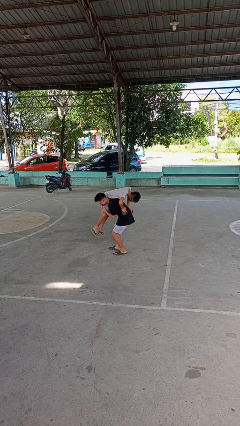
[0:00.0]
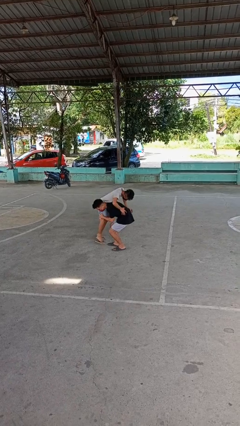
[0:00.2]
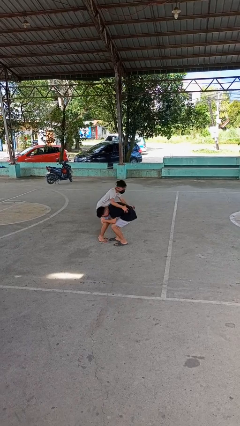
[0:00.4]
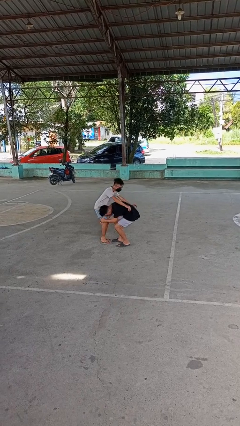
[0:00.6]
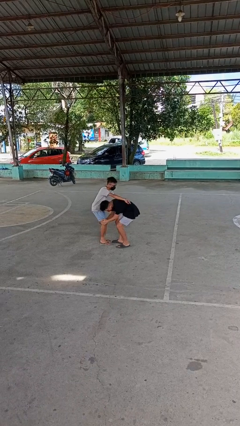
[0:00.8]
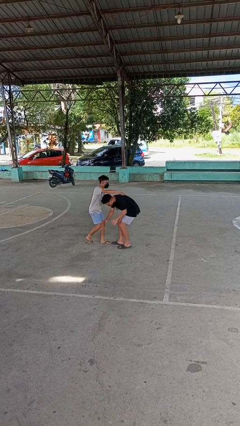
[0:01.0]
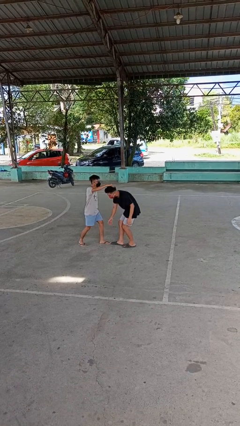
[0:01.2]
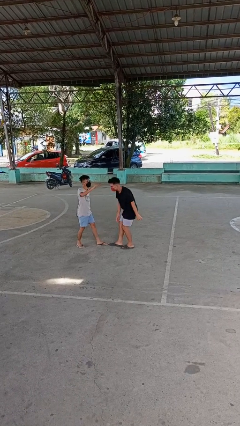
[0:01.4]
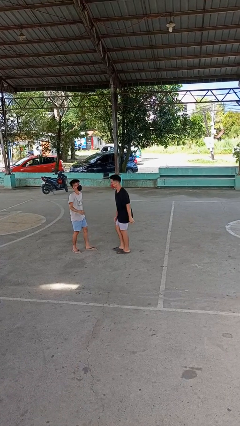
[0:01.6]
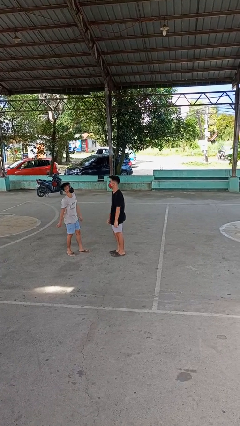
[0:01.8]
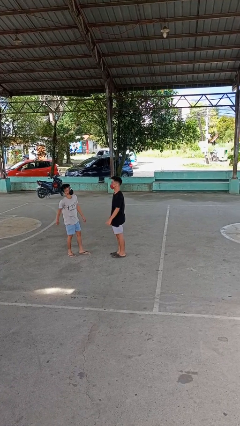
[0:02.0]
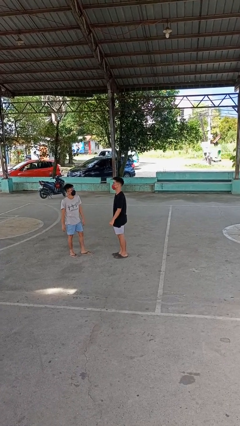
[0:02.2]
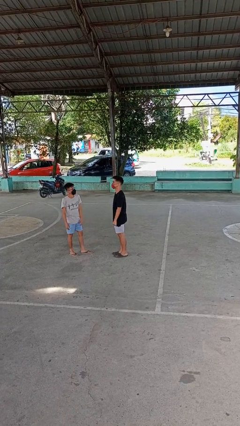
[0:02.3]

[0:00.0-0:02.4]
person puts down person

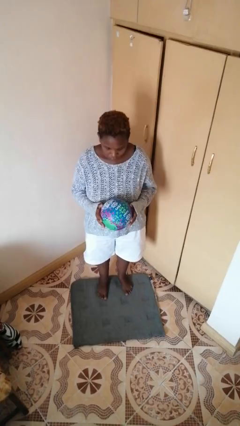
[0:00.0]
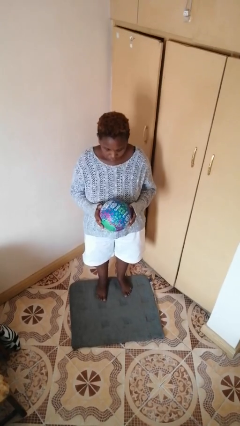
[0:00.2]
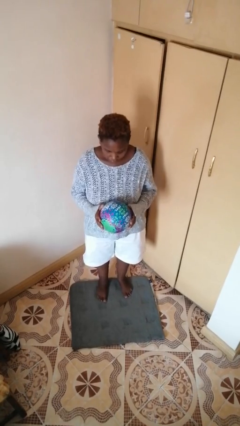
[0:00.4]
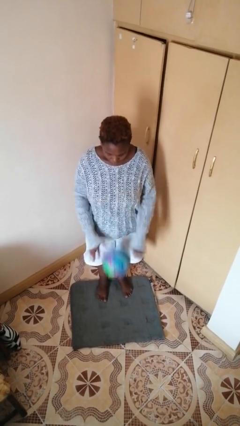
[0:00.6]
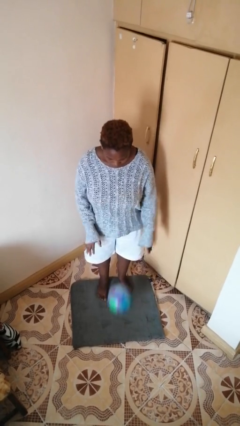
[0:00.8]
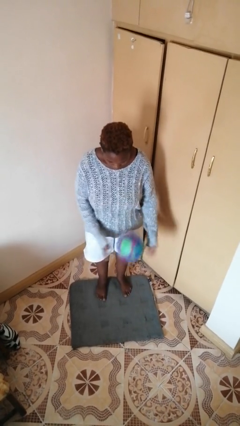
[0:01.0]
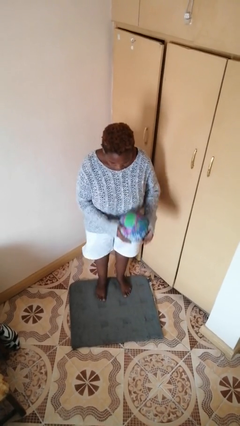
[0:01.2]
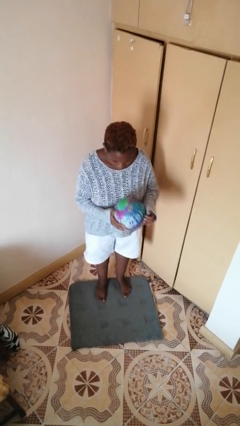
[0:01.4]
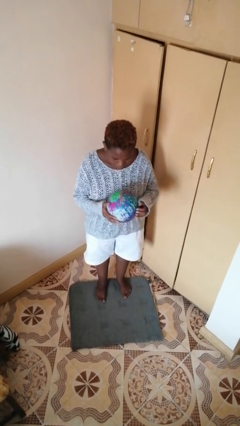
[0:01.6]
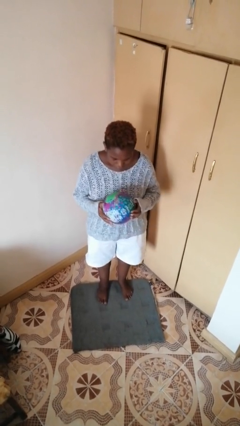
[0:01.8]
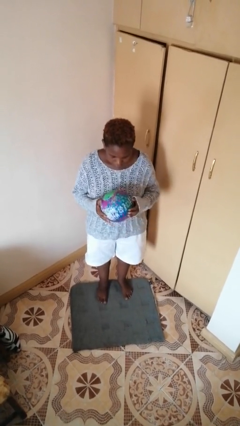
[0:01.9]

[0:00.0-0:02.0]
person bounces ball on floor

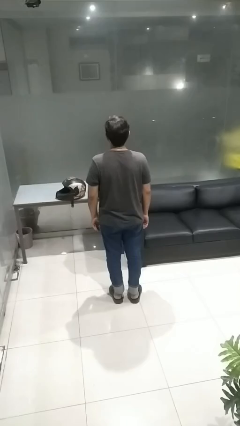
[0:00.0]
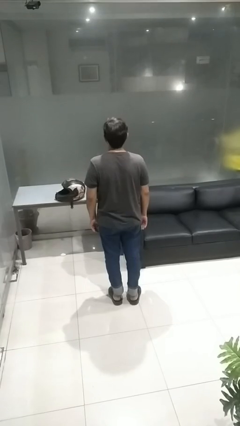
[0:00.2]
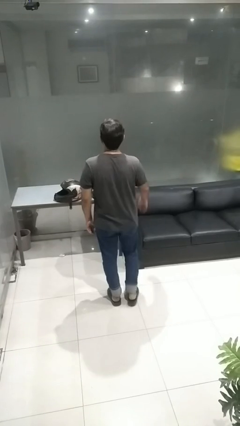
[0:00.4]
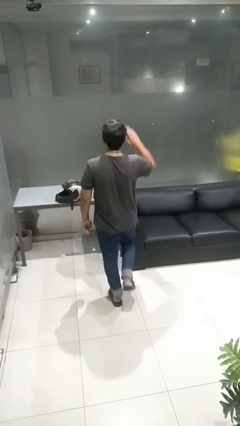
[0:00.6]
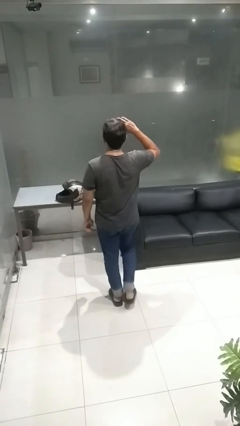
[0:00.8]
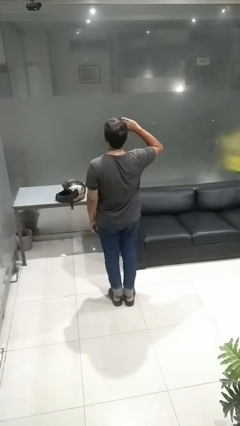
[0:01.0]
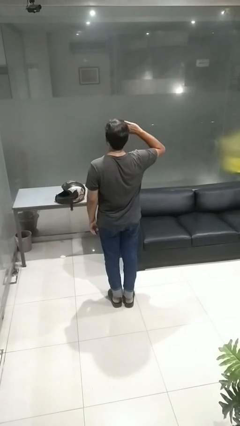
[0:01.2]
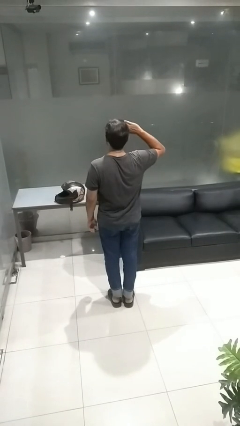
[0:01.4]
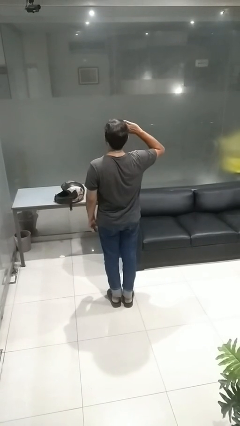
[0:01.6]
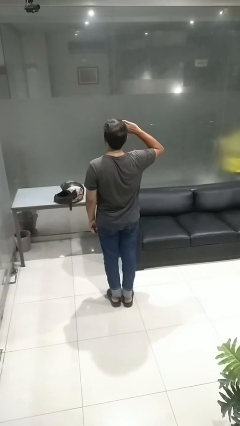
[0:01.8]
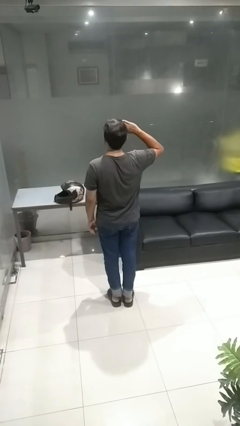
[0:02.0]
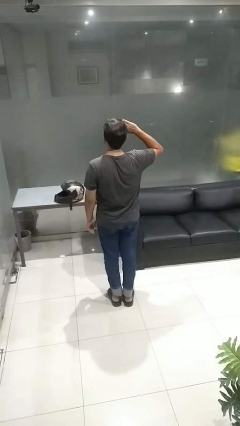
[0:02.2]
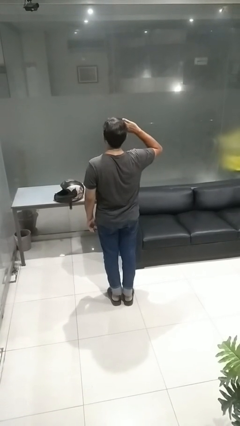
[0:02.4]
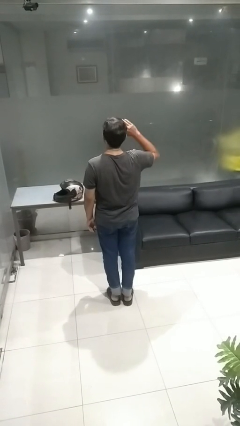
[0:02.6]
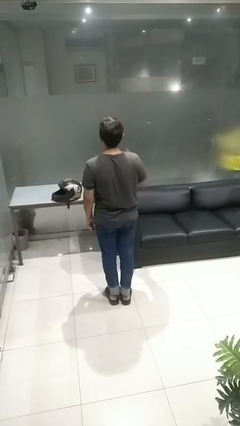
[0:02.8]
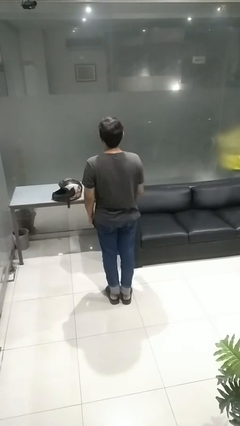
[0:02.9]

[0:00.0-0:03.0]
person salutes

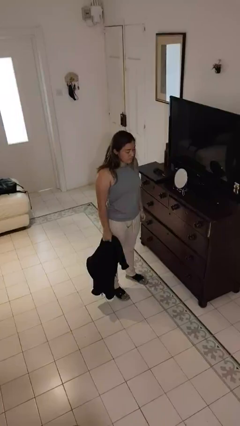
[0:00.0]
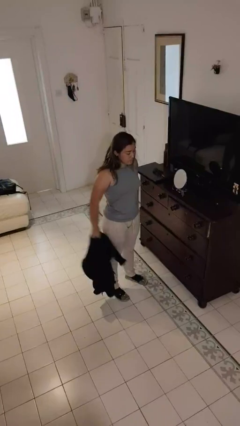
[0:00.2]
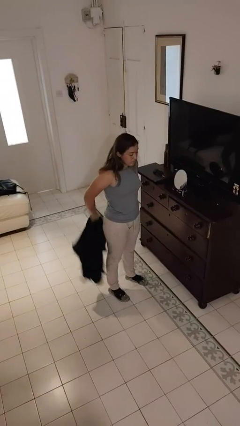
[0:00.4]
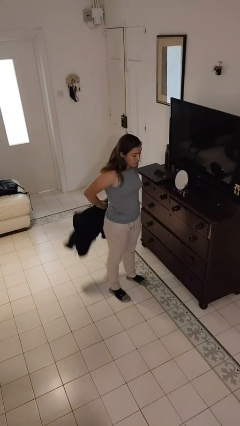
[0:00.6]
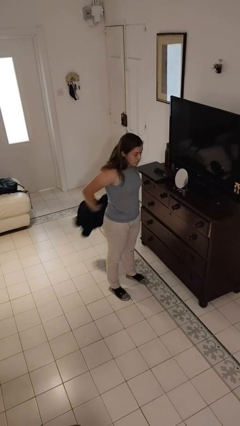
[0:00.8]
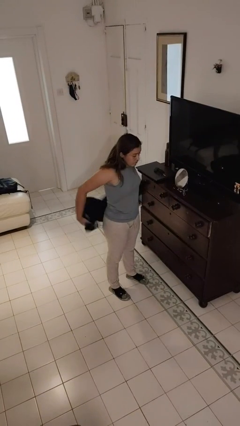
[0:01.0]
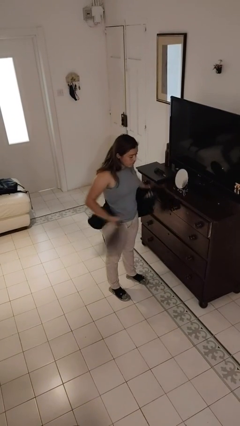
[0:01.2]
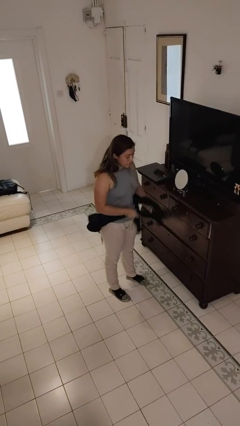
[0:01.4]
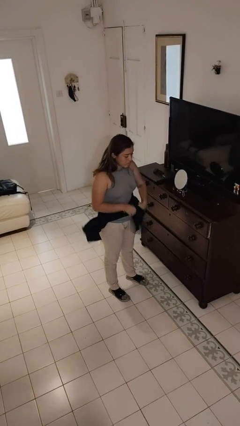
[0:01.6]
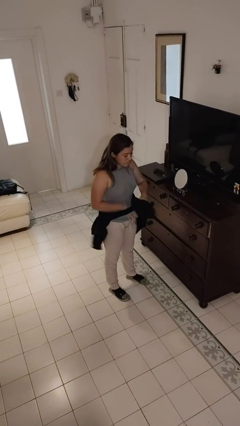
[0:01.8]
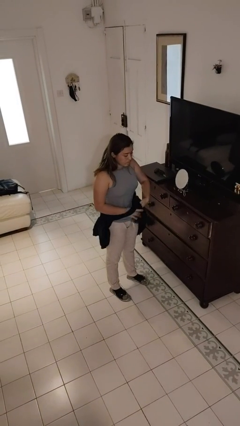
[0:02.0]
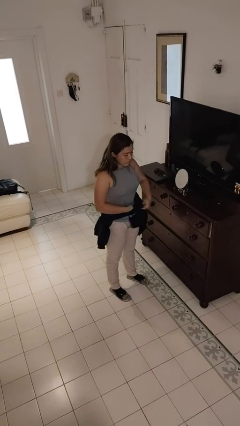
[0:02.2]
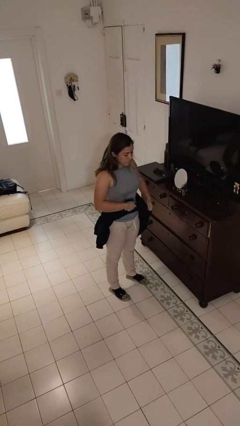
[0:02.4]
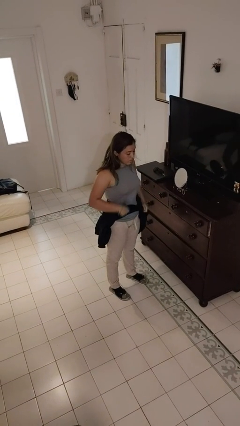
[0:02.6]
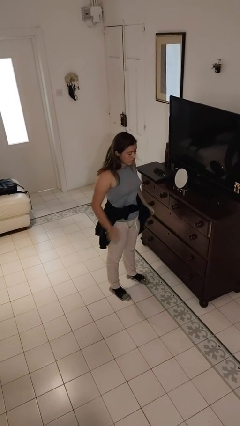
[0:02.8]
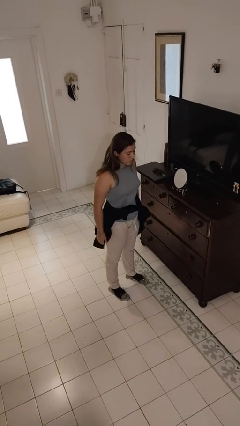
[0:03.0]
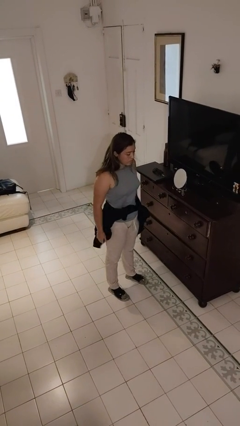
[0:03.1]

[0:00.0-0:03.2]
person ties jacket around waist

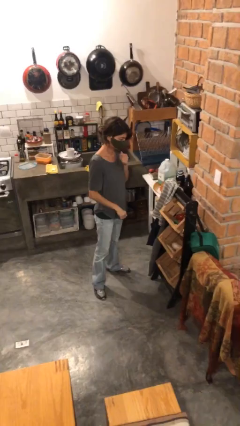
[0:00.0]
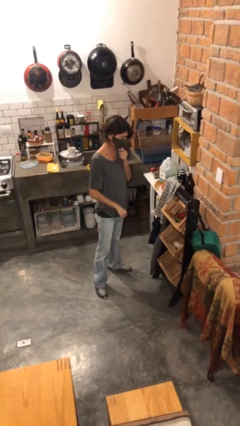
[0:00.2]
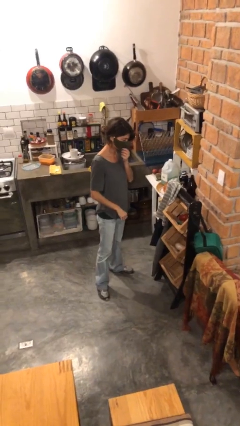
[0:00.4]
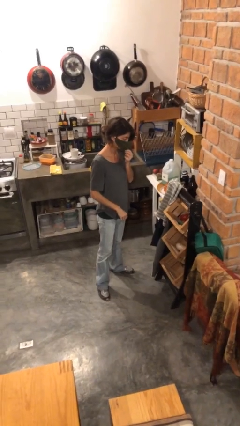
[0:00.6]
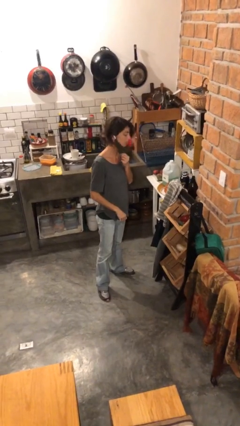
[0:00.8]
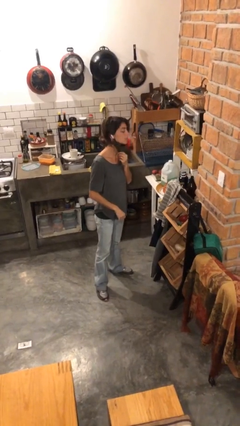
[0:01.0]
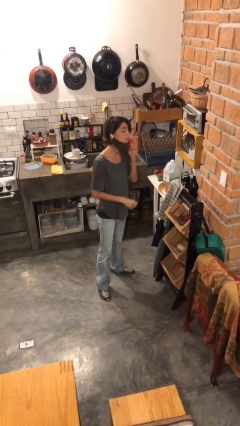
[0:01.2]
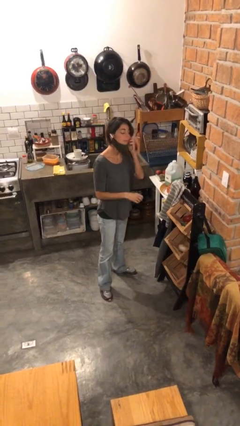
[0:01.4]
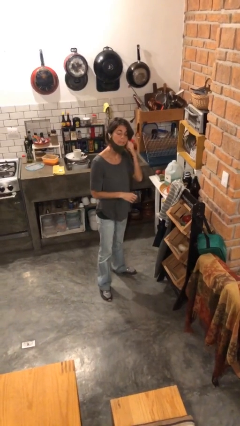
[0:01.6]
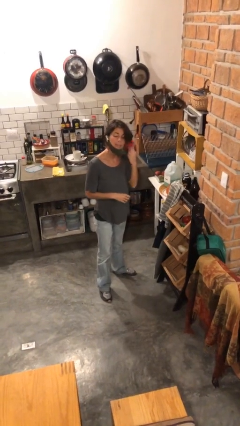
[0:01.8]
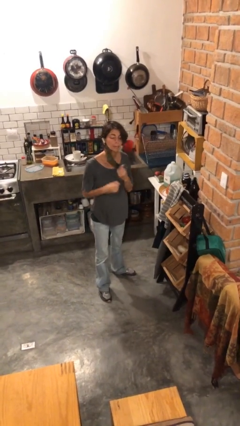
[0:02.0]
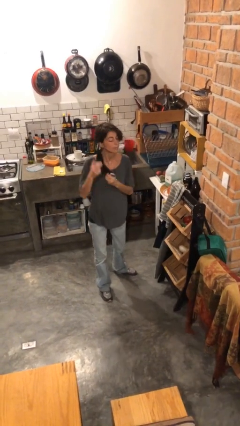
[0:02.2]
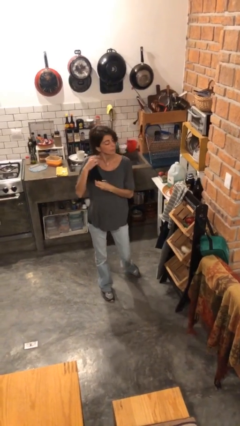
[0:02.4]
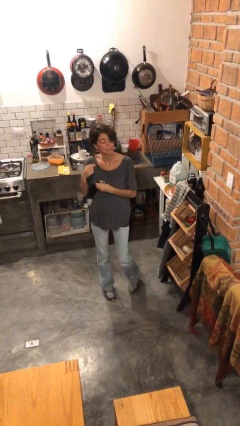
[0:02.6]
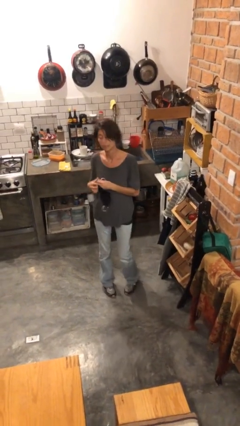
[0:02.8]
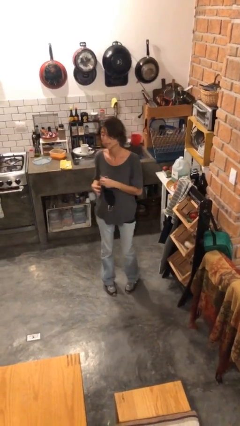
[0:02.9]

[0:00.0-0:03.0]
person takes off facemask

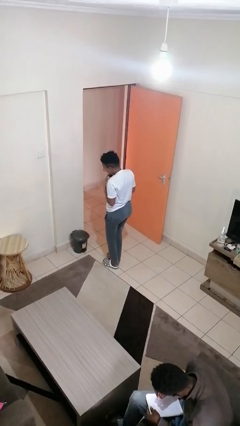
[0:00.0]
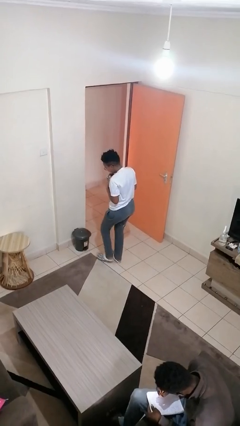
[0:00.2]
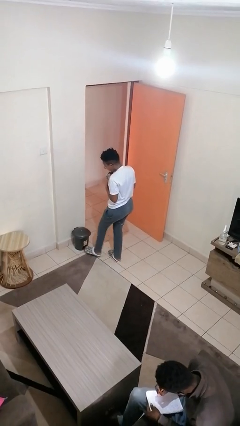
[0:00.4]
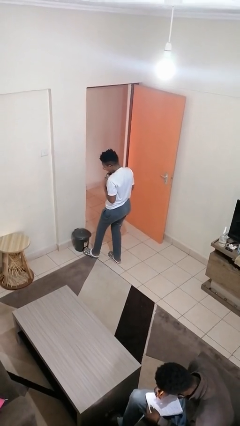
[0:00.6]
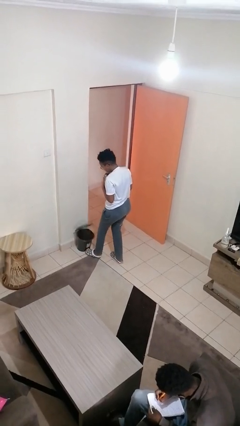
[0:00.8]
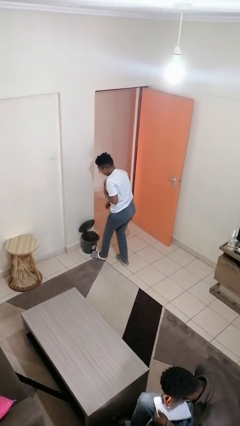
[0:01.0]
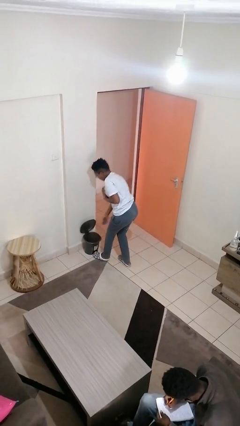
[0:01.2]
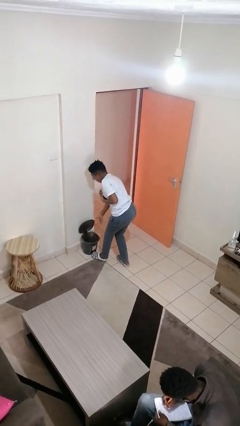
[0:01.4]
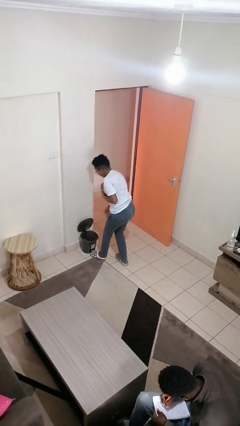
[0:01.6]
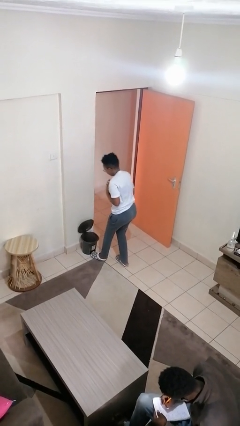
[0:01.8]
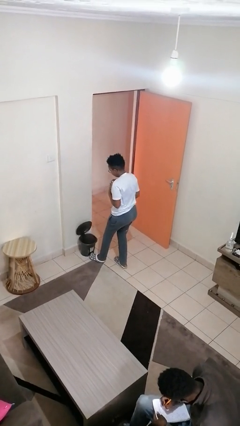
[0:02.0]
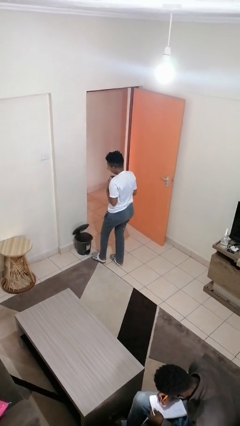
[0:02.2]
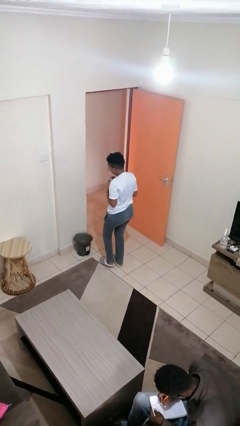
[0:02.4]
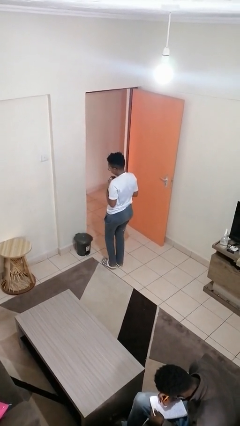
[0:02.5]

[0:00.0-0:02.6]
person discards trash

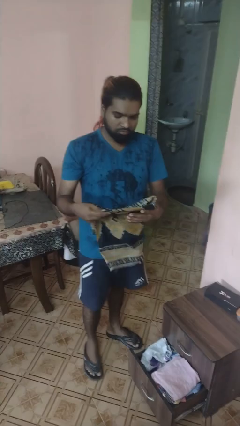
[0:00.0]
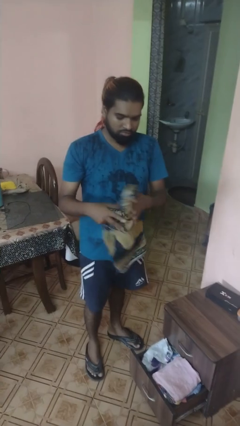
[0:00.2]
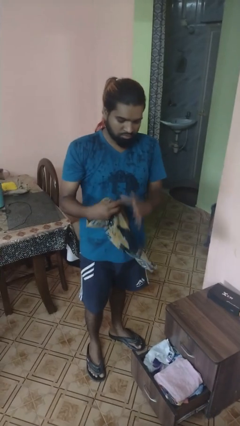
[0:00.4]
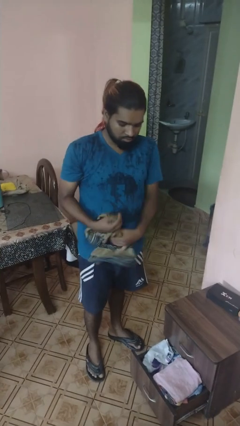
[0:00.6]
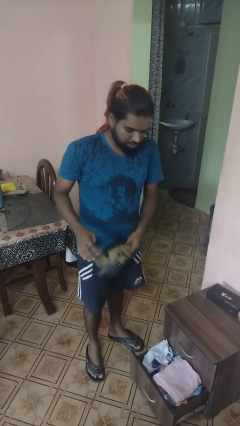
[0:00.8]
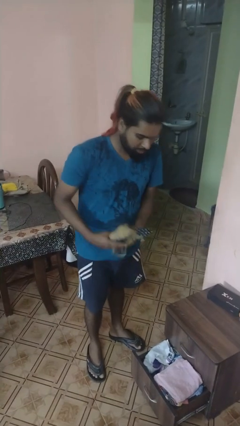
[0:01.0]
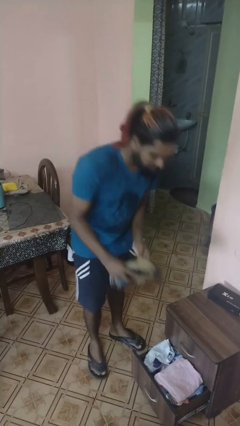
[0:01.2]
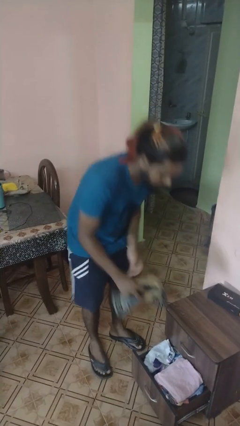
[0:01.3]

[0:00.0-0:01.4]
person takes clothes from dresser
